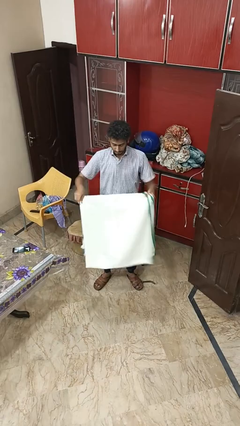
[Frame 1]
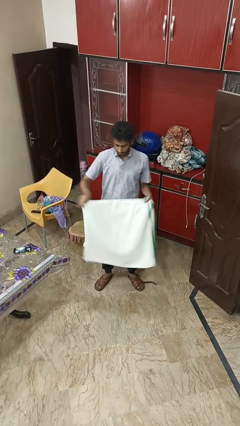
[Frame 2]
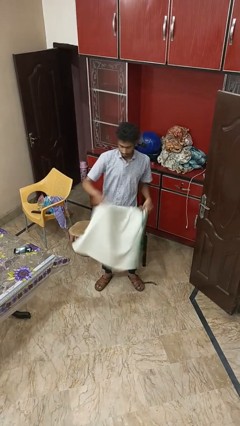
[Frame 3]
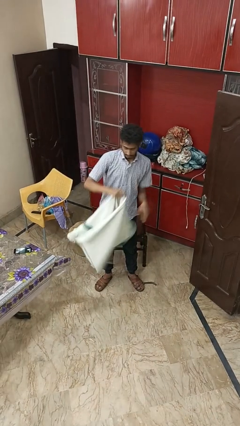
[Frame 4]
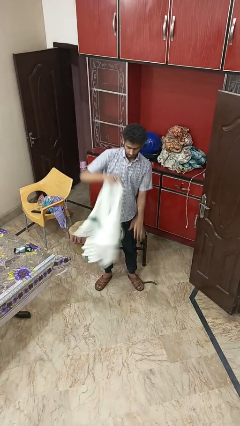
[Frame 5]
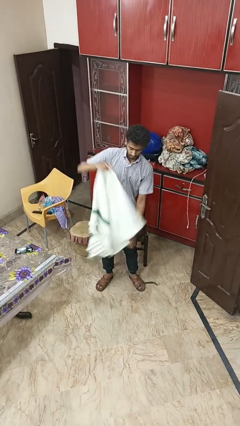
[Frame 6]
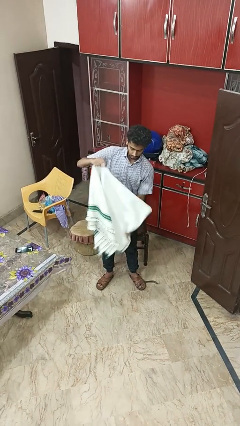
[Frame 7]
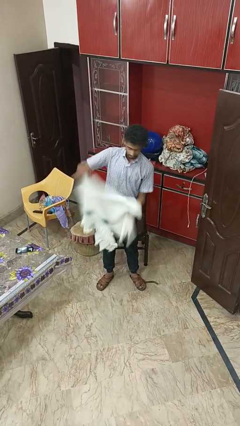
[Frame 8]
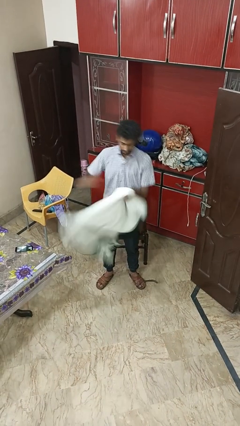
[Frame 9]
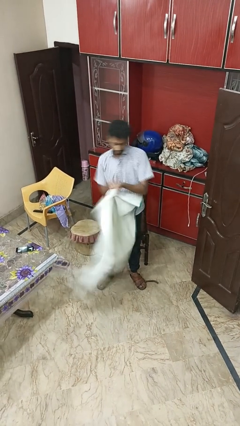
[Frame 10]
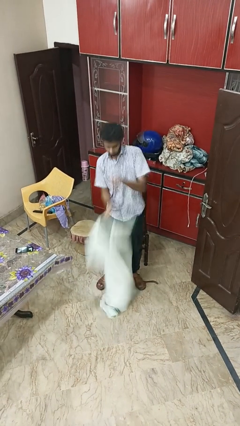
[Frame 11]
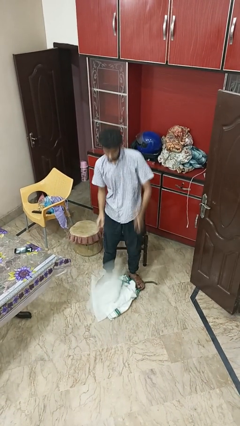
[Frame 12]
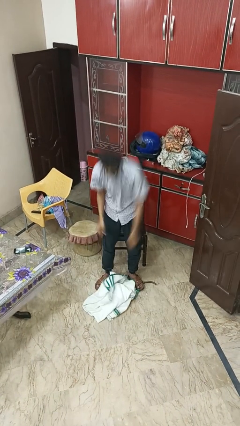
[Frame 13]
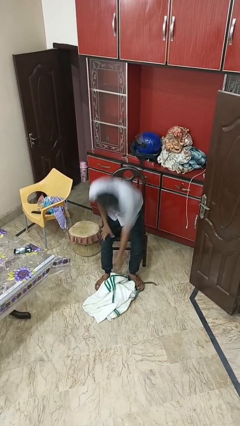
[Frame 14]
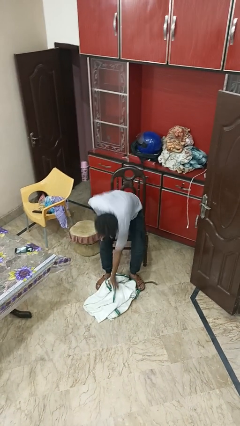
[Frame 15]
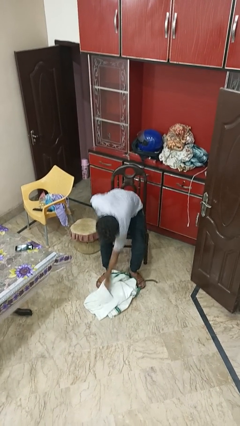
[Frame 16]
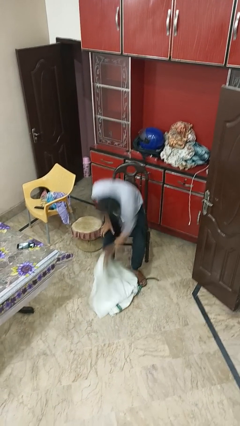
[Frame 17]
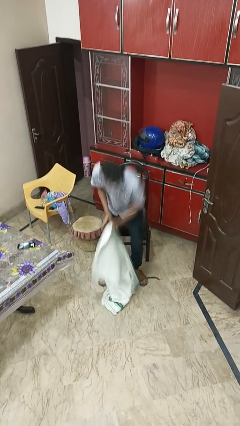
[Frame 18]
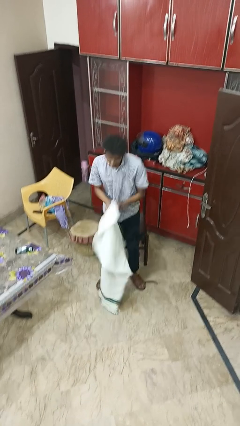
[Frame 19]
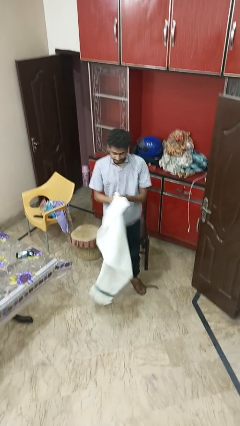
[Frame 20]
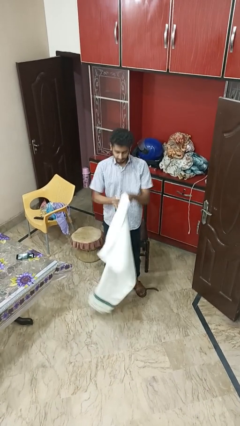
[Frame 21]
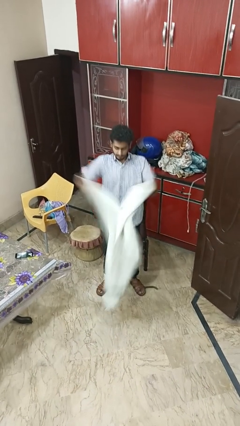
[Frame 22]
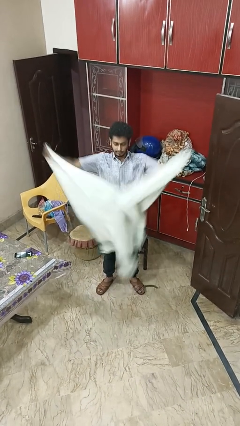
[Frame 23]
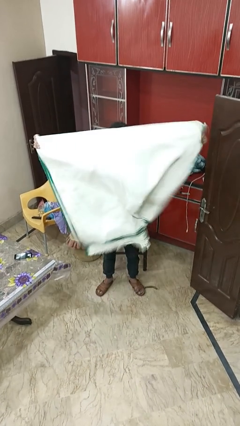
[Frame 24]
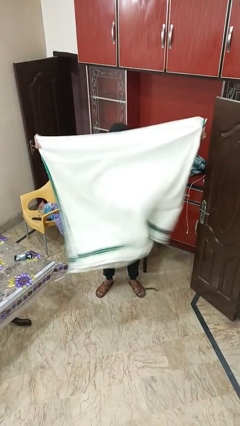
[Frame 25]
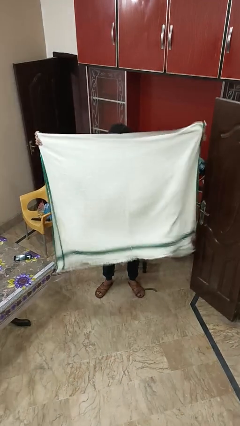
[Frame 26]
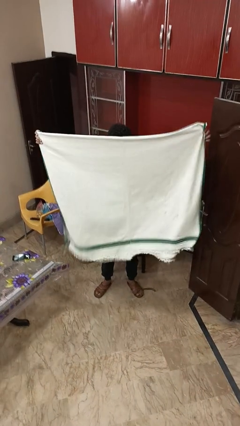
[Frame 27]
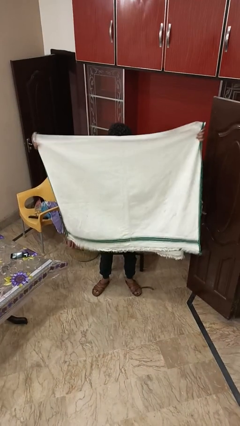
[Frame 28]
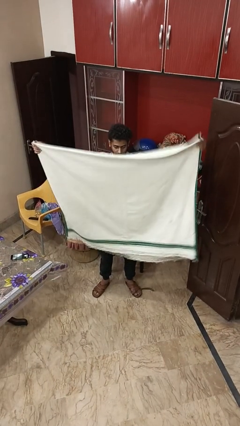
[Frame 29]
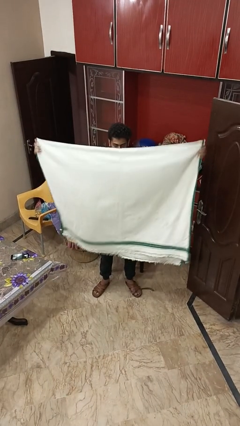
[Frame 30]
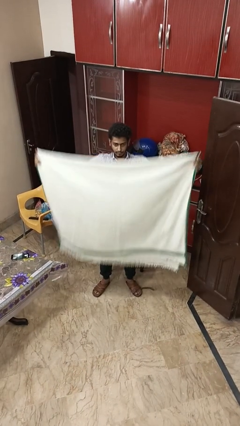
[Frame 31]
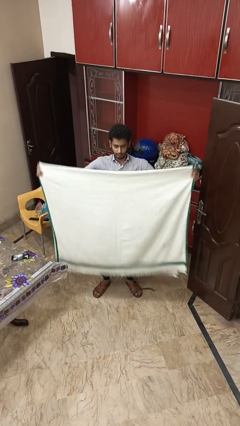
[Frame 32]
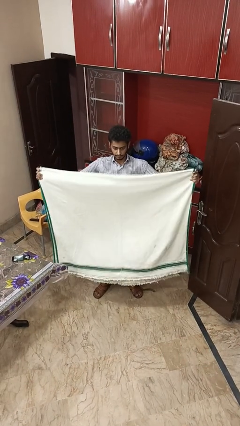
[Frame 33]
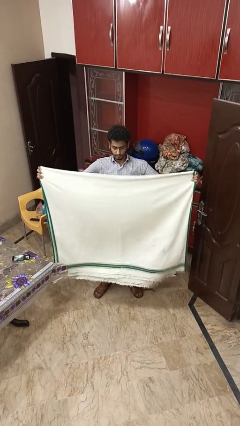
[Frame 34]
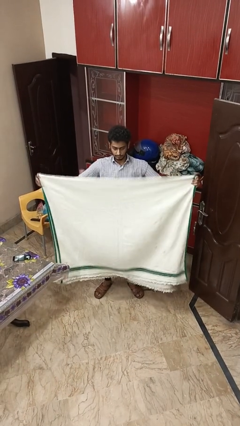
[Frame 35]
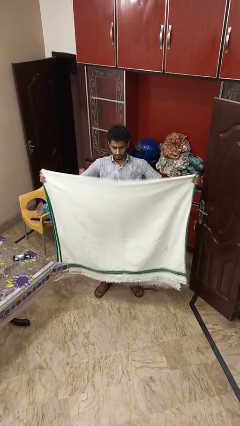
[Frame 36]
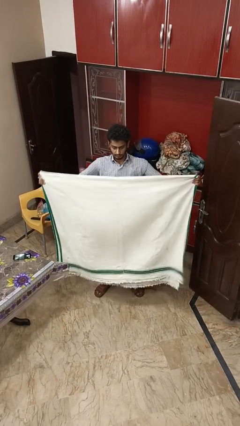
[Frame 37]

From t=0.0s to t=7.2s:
person unfolds blanket

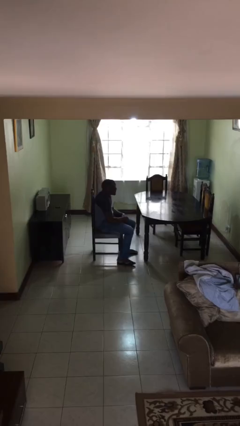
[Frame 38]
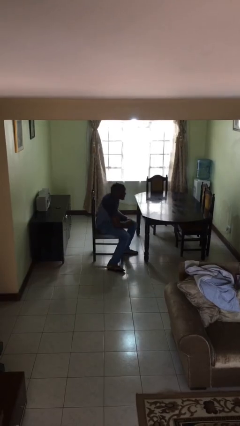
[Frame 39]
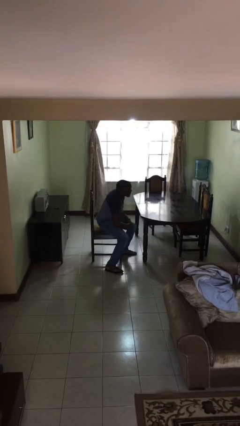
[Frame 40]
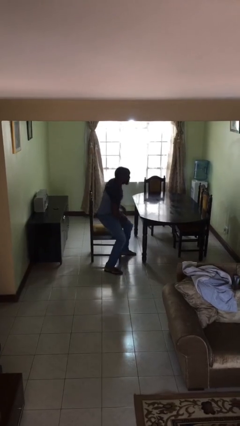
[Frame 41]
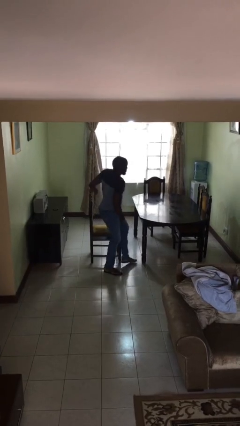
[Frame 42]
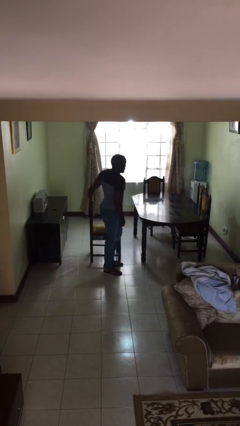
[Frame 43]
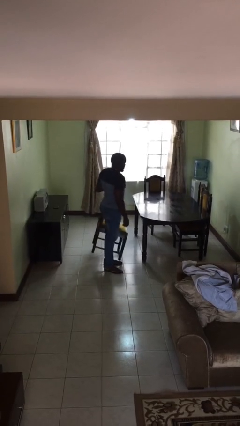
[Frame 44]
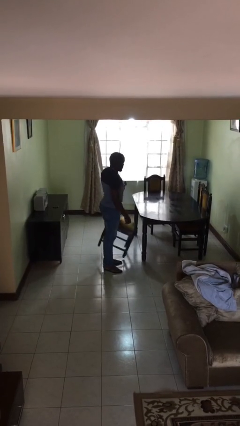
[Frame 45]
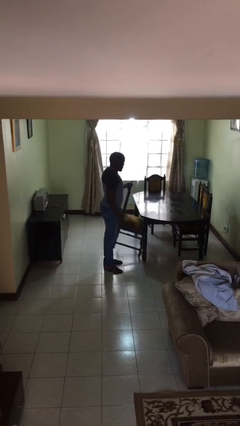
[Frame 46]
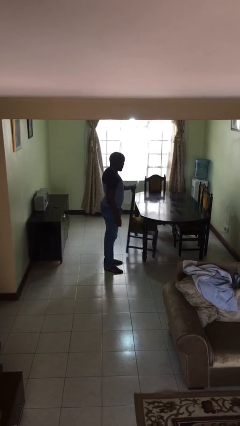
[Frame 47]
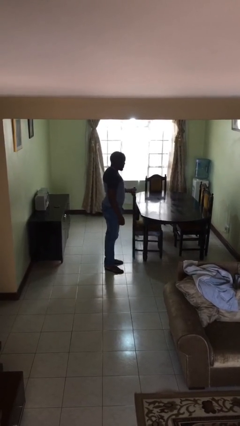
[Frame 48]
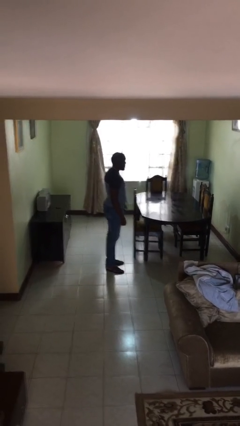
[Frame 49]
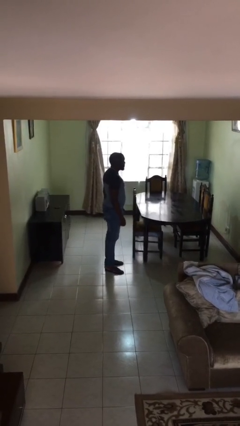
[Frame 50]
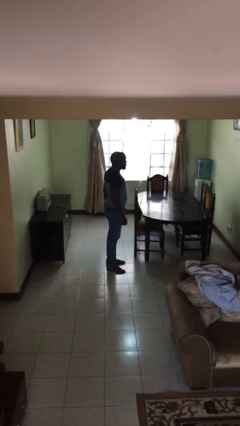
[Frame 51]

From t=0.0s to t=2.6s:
person stands up

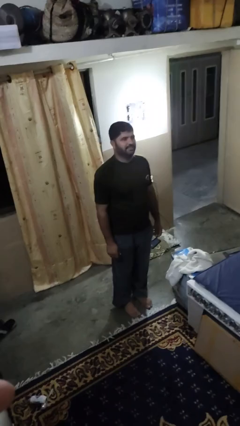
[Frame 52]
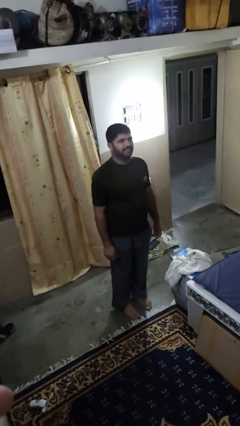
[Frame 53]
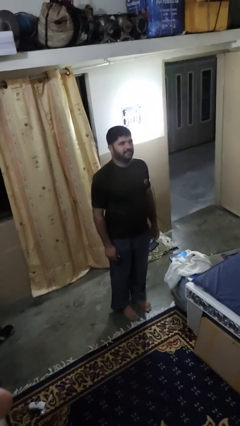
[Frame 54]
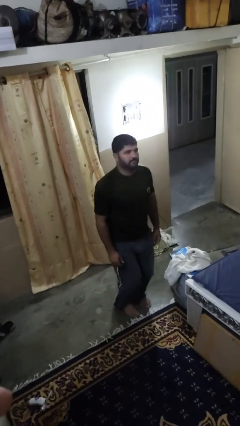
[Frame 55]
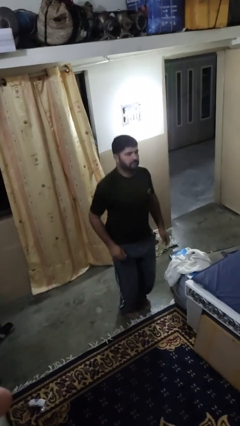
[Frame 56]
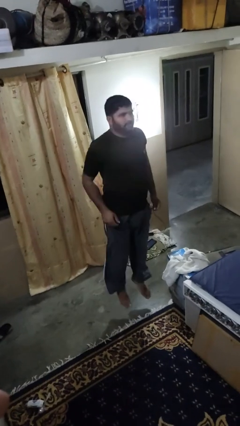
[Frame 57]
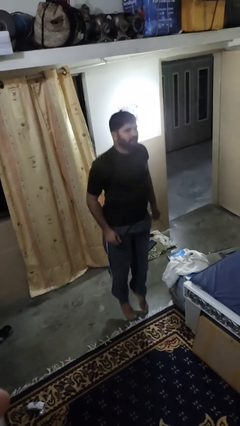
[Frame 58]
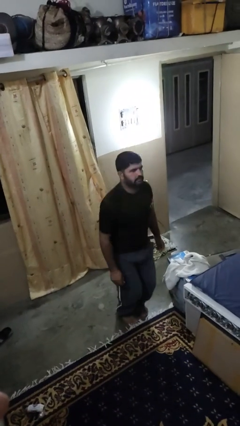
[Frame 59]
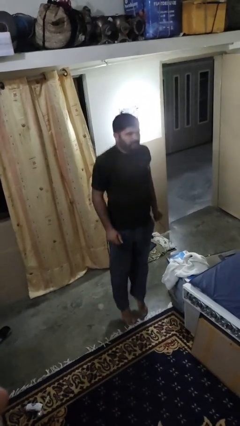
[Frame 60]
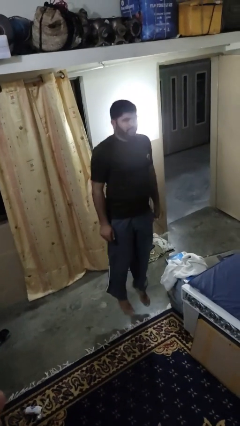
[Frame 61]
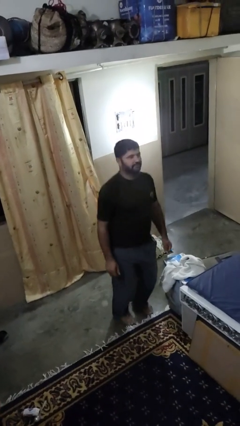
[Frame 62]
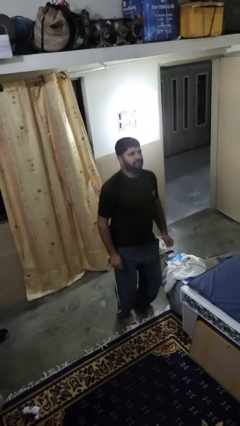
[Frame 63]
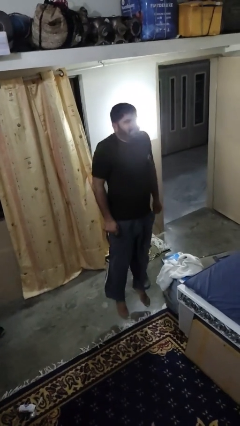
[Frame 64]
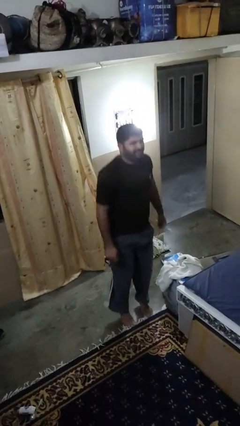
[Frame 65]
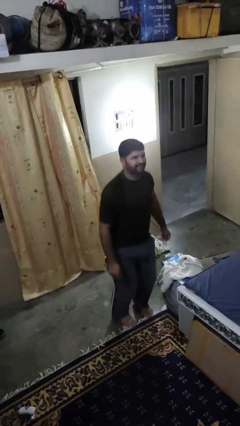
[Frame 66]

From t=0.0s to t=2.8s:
person jumps

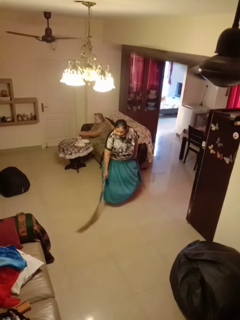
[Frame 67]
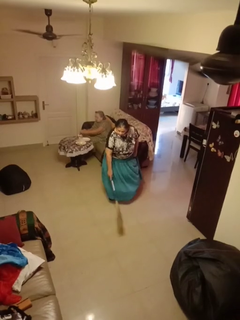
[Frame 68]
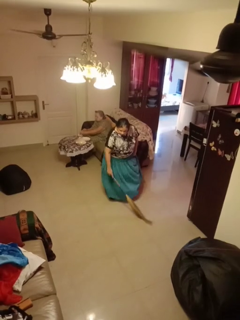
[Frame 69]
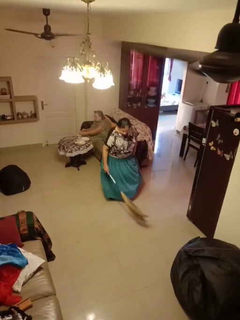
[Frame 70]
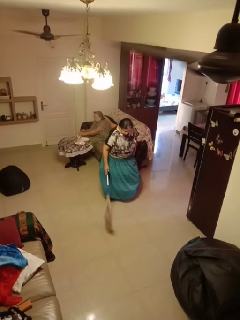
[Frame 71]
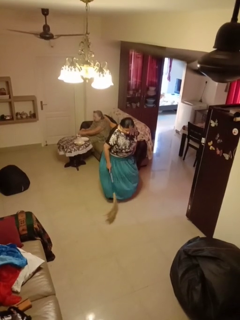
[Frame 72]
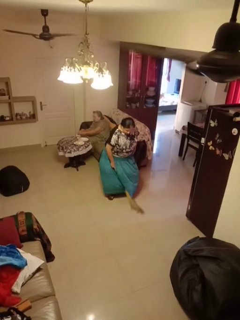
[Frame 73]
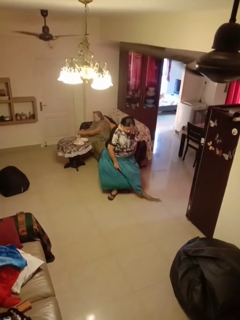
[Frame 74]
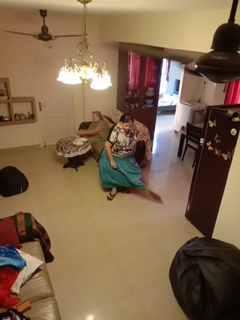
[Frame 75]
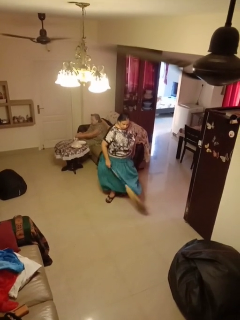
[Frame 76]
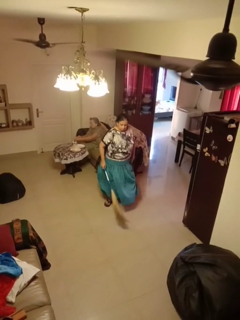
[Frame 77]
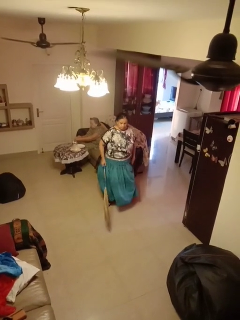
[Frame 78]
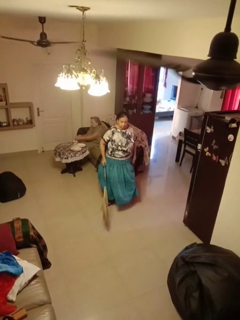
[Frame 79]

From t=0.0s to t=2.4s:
person sweeps floor

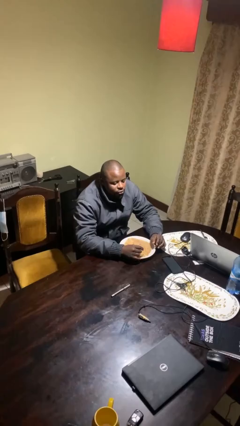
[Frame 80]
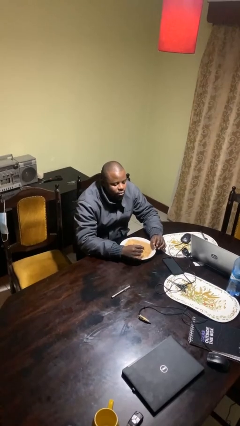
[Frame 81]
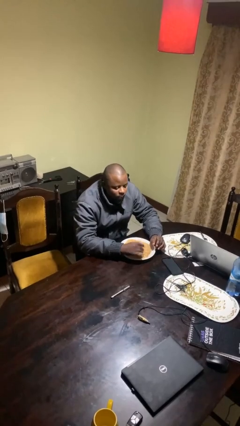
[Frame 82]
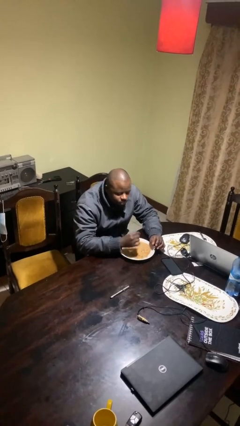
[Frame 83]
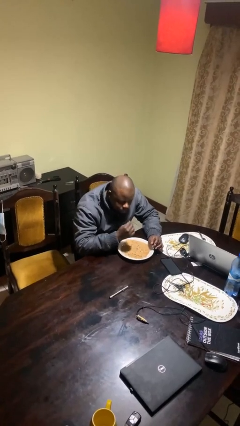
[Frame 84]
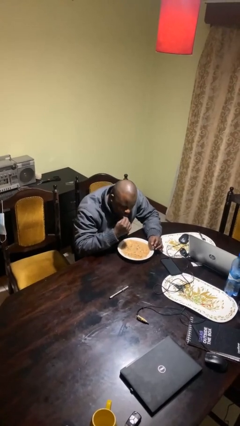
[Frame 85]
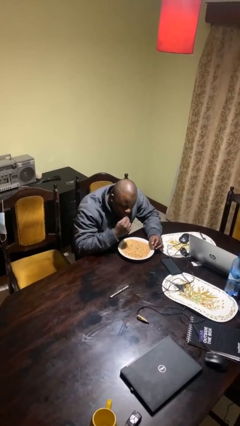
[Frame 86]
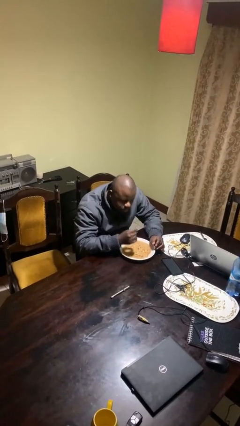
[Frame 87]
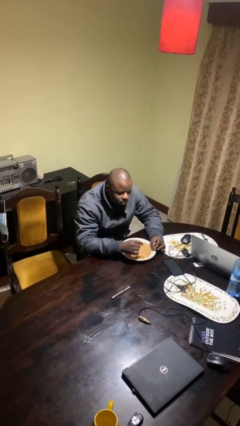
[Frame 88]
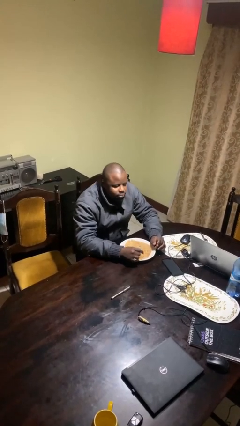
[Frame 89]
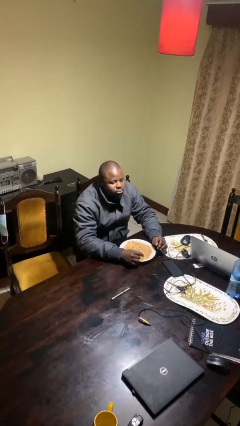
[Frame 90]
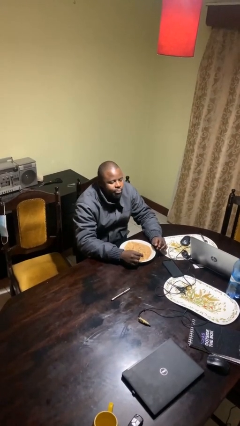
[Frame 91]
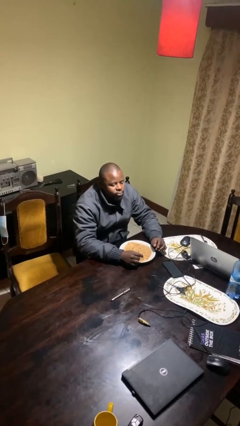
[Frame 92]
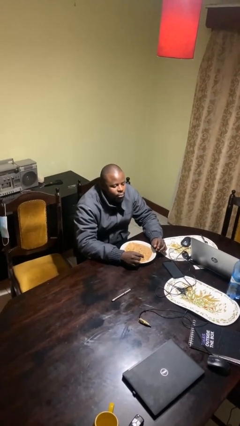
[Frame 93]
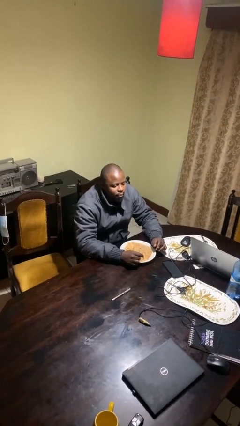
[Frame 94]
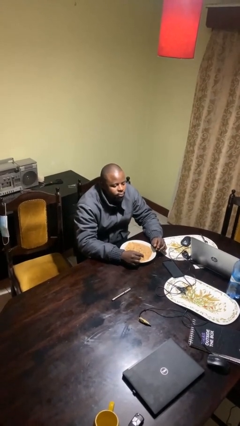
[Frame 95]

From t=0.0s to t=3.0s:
person eats with hands
